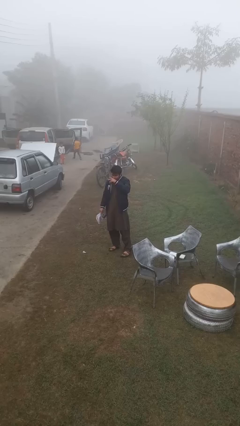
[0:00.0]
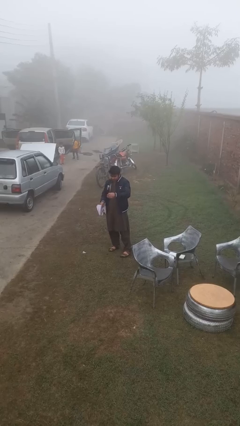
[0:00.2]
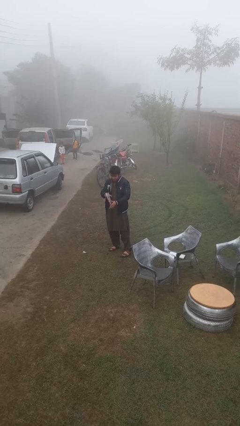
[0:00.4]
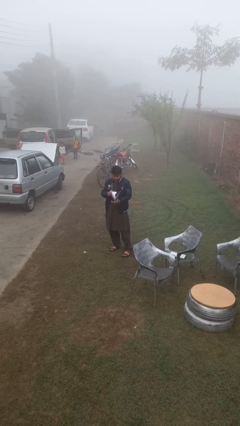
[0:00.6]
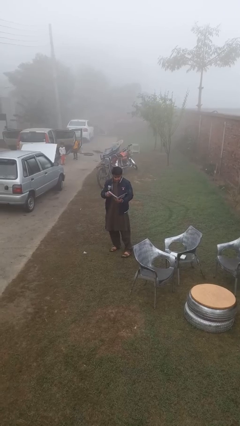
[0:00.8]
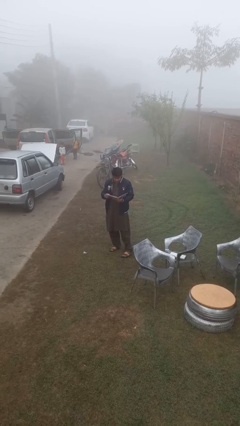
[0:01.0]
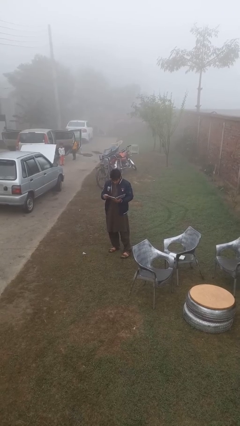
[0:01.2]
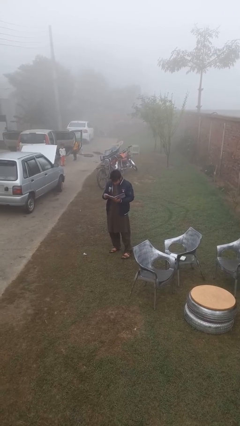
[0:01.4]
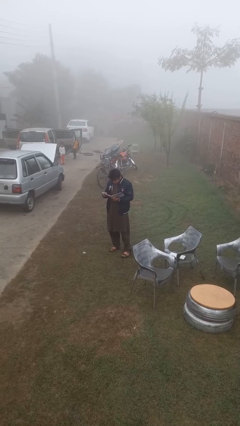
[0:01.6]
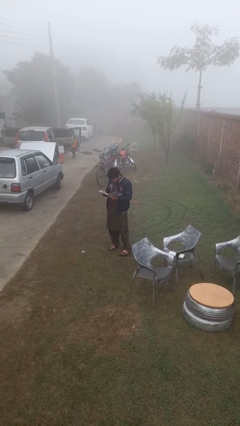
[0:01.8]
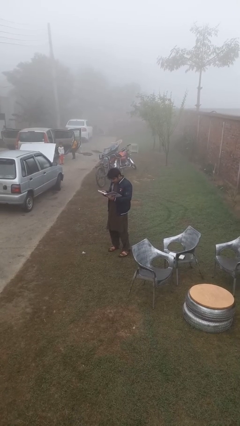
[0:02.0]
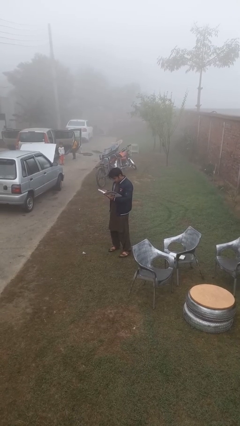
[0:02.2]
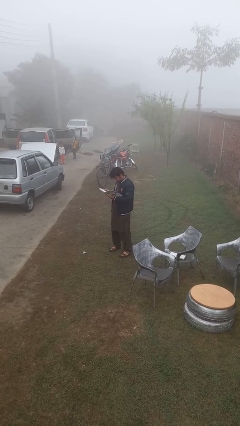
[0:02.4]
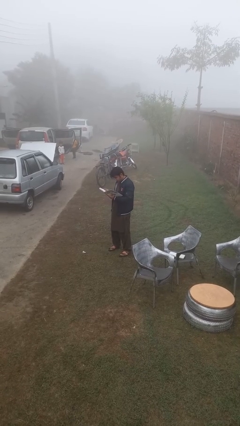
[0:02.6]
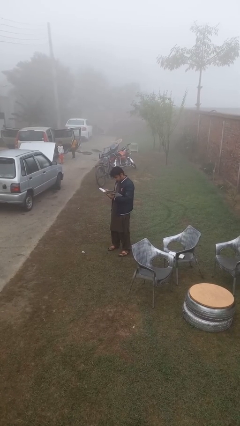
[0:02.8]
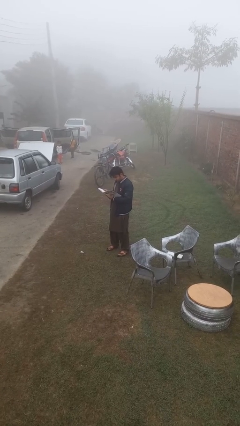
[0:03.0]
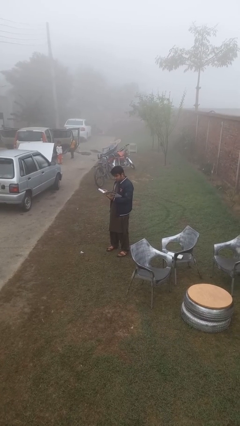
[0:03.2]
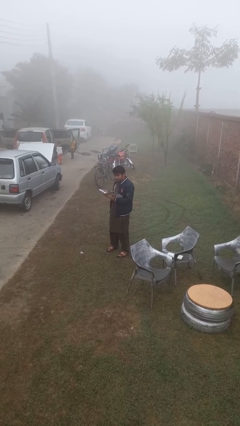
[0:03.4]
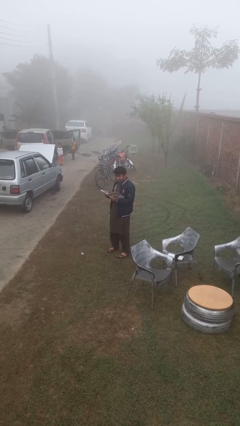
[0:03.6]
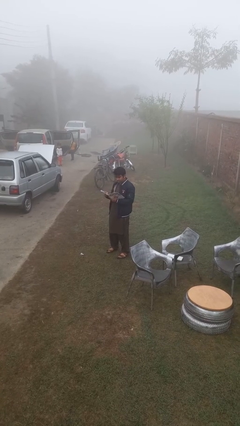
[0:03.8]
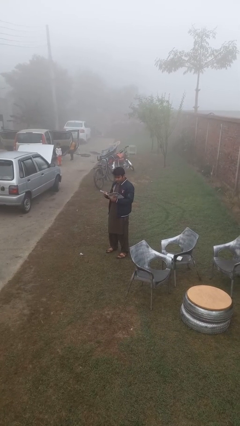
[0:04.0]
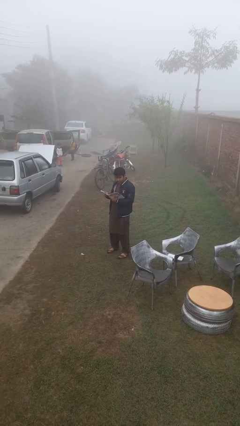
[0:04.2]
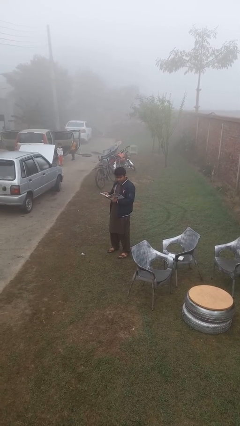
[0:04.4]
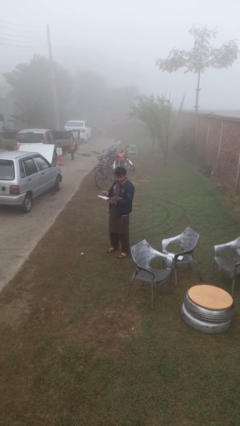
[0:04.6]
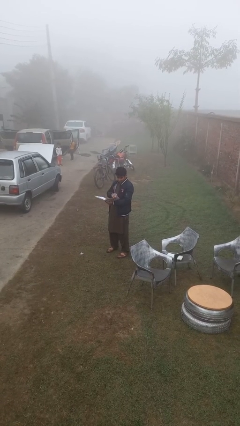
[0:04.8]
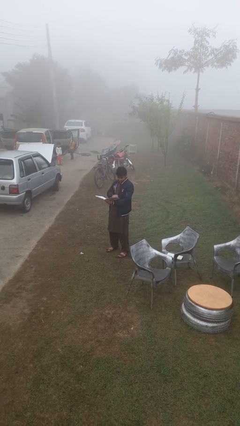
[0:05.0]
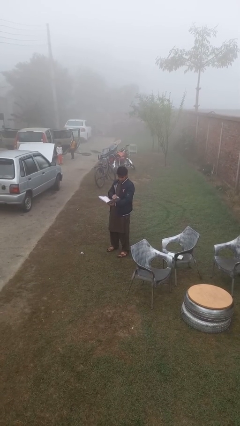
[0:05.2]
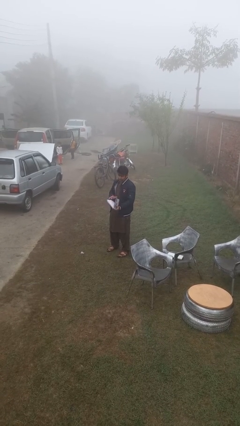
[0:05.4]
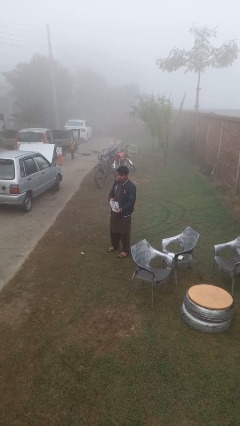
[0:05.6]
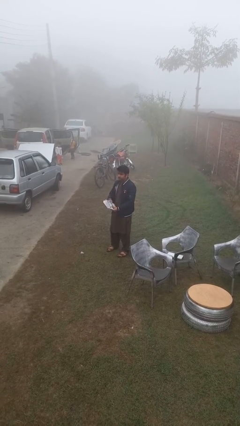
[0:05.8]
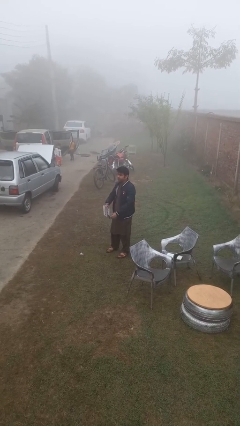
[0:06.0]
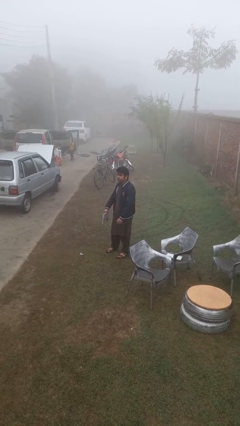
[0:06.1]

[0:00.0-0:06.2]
person reads document

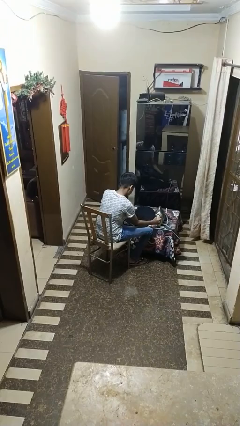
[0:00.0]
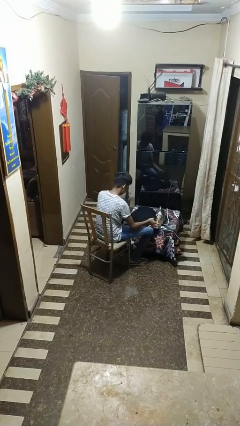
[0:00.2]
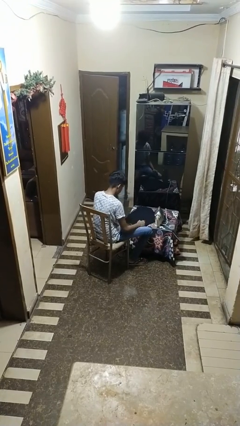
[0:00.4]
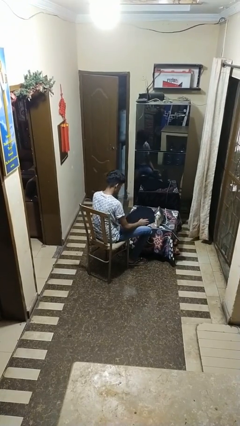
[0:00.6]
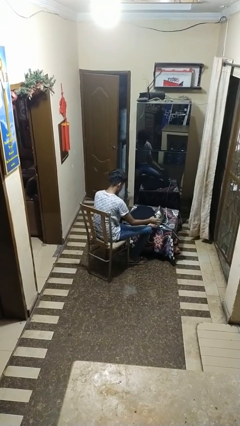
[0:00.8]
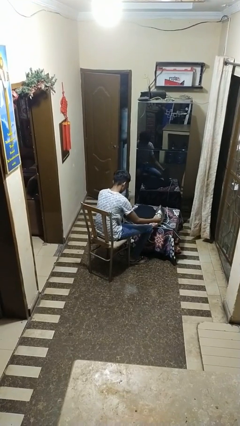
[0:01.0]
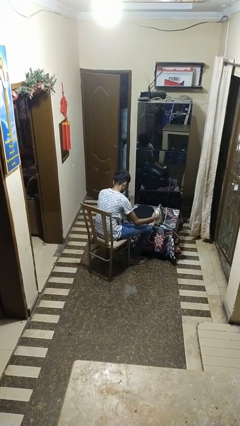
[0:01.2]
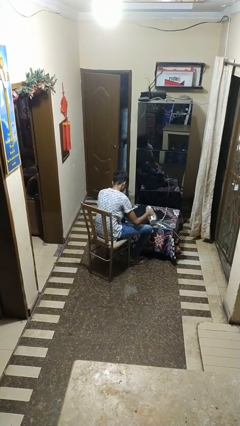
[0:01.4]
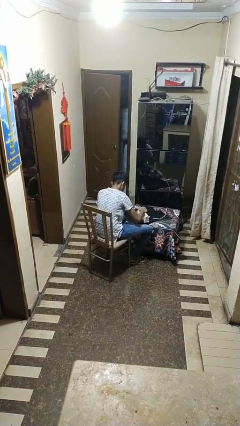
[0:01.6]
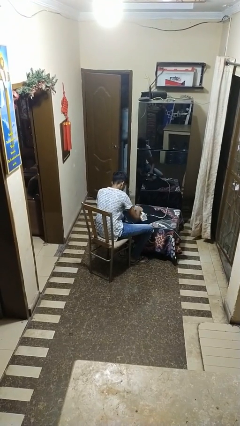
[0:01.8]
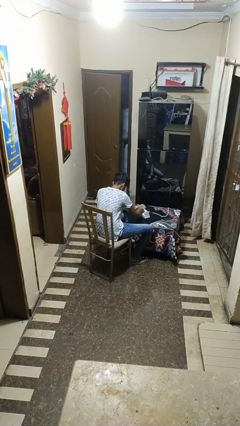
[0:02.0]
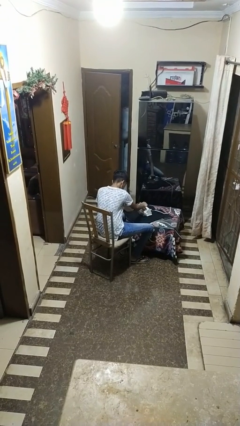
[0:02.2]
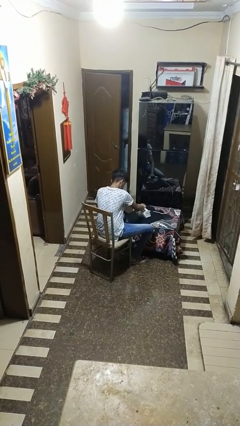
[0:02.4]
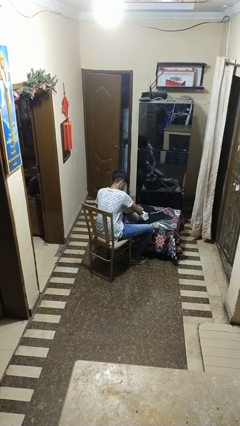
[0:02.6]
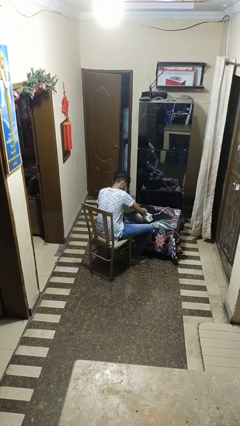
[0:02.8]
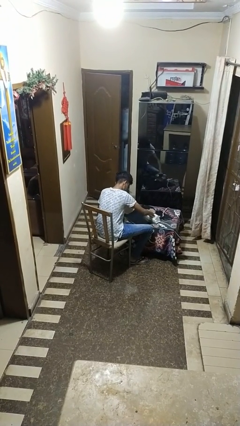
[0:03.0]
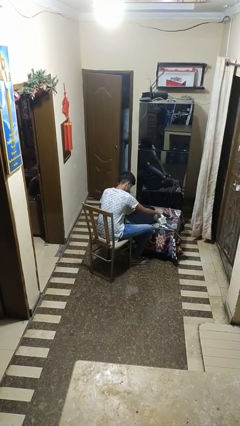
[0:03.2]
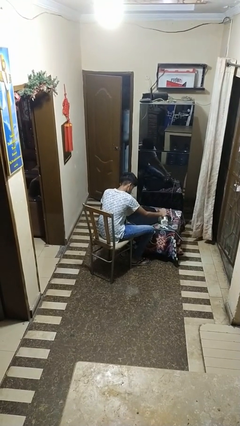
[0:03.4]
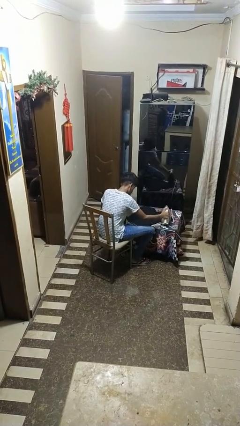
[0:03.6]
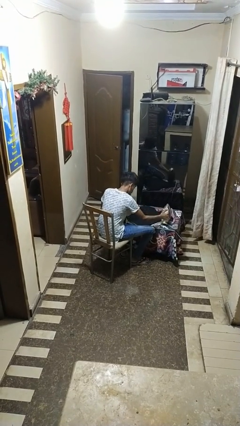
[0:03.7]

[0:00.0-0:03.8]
person irons clothes

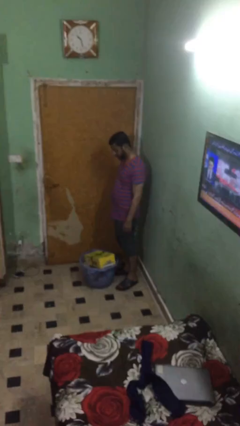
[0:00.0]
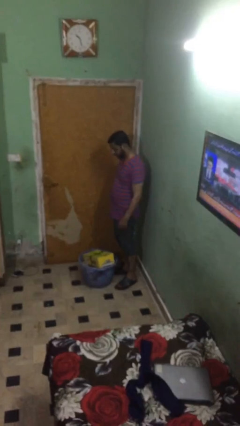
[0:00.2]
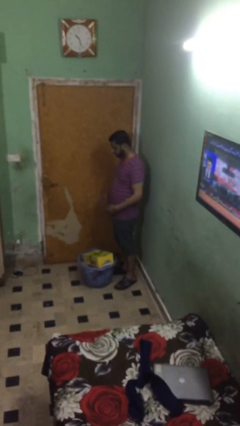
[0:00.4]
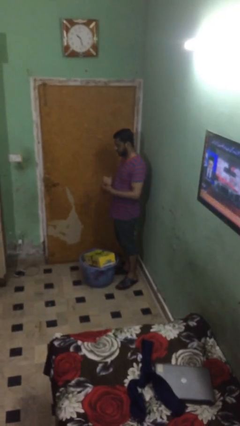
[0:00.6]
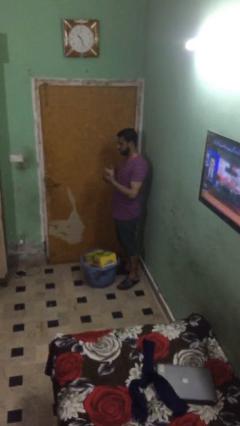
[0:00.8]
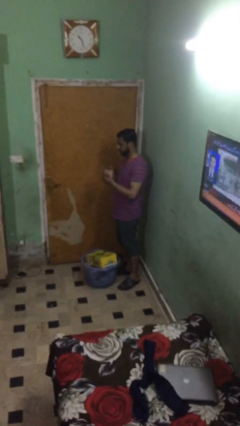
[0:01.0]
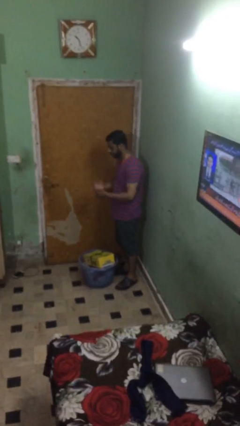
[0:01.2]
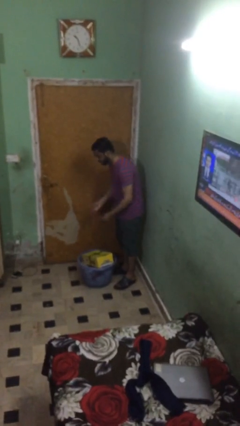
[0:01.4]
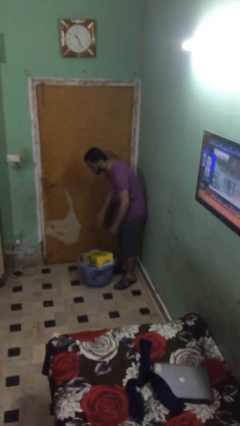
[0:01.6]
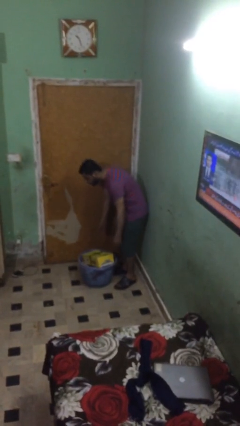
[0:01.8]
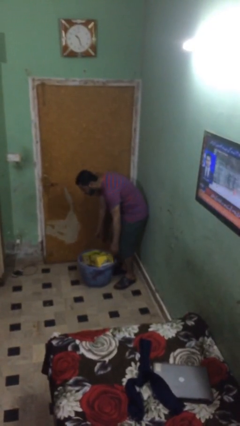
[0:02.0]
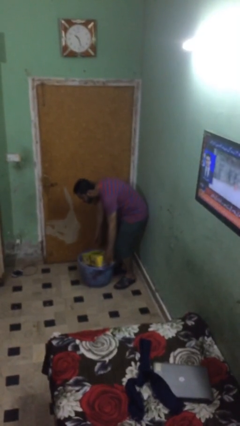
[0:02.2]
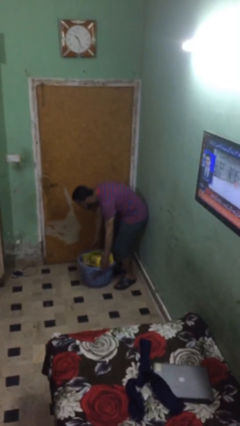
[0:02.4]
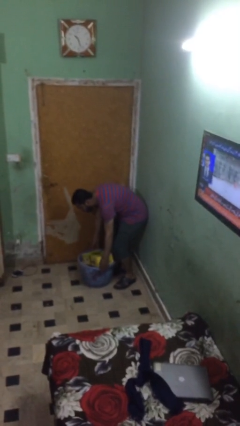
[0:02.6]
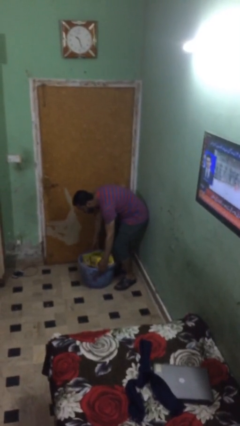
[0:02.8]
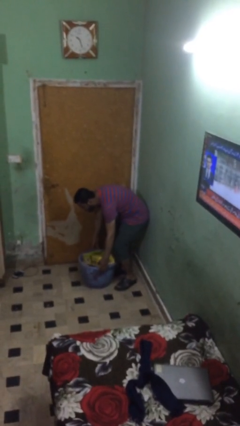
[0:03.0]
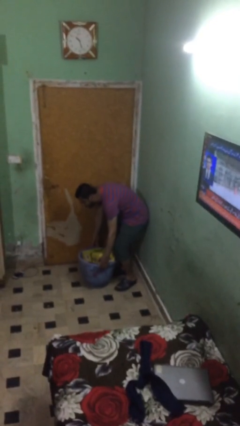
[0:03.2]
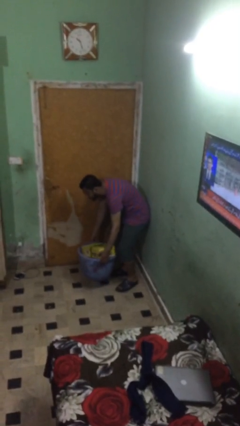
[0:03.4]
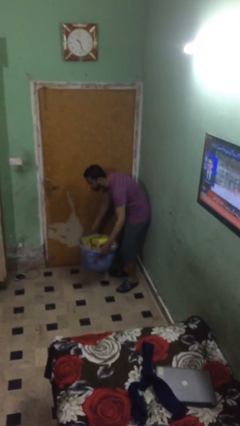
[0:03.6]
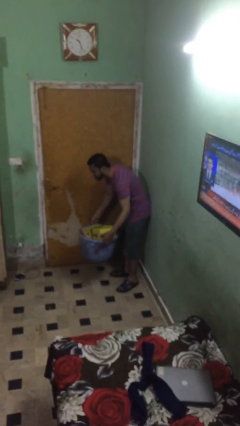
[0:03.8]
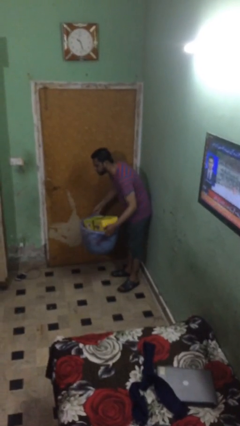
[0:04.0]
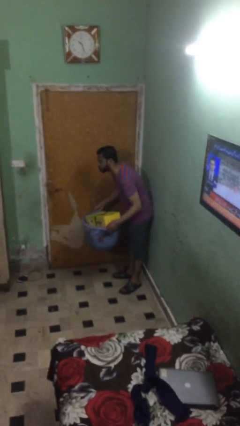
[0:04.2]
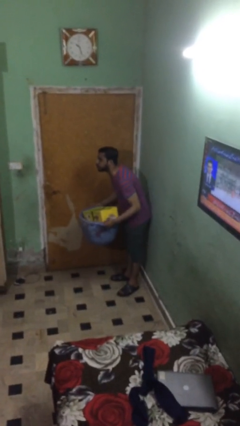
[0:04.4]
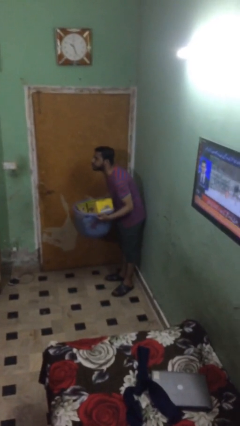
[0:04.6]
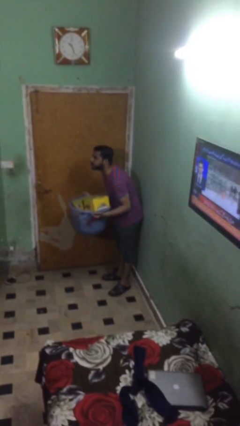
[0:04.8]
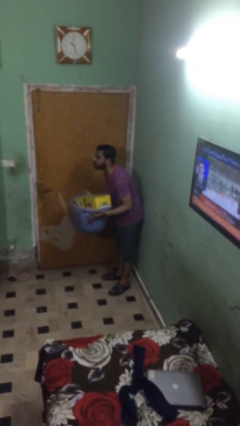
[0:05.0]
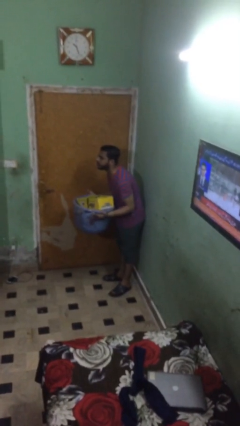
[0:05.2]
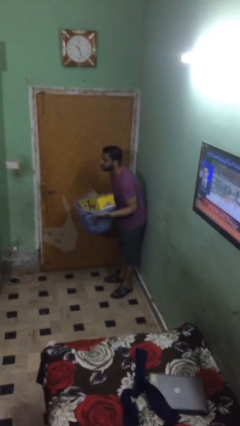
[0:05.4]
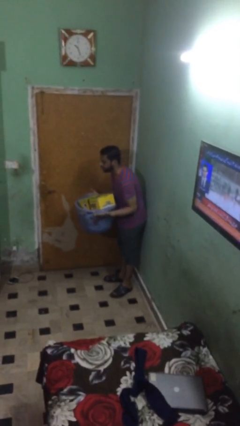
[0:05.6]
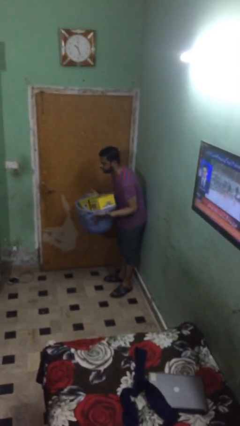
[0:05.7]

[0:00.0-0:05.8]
person picks up object from floor

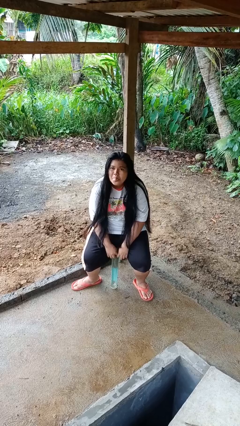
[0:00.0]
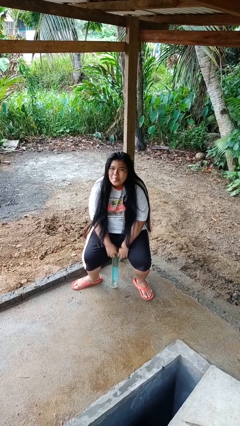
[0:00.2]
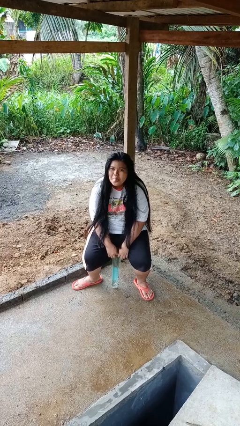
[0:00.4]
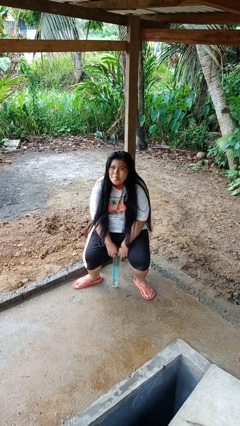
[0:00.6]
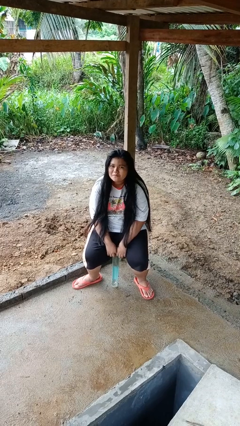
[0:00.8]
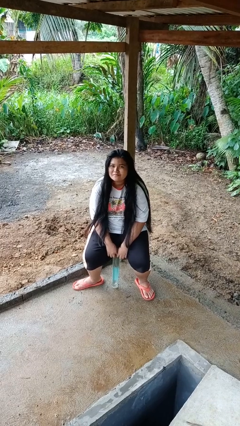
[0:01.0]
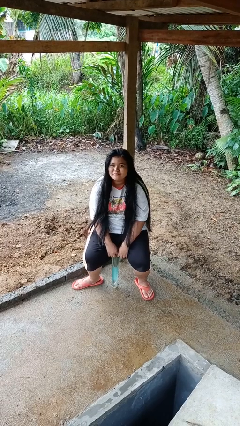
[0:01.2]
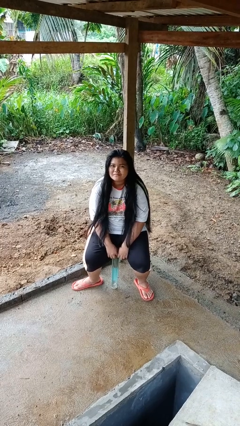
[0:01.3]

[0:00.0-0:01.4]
person sticks out tongue

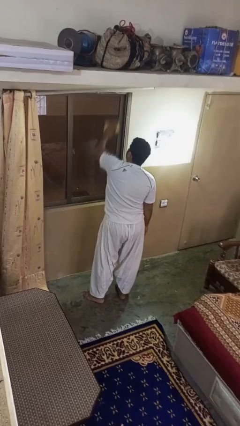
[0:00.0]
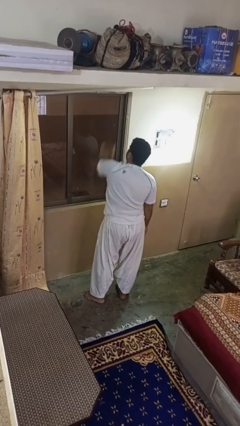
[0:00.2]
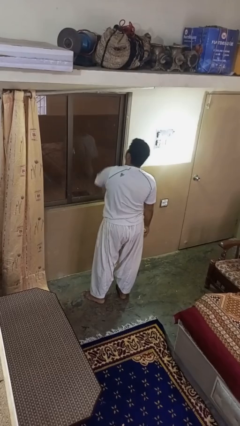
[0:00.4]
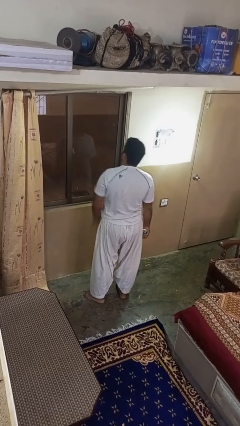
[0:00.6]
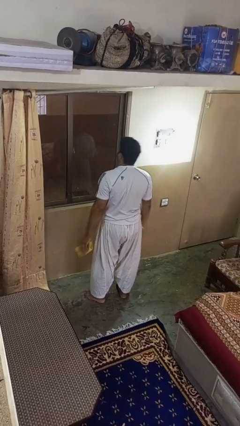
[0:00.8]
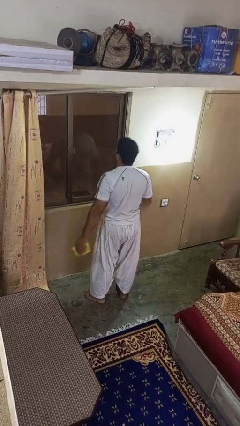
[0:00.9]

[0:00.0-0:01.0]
person sprays from bottle
